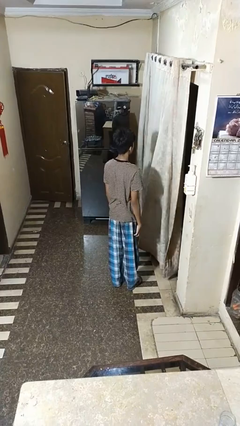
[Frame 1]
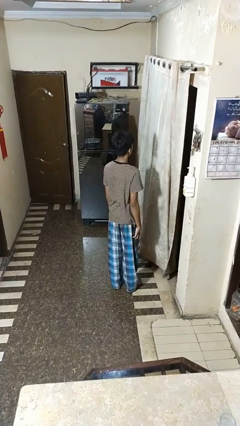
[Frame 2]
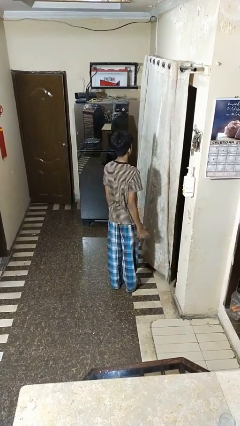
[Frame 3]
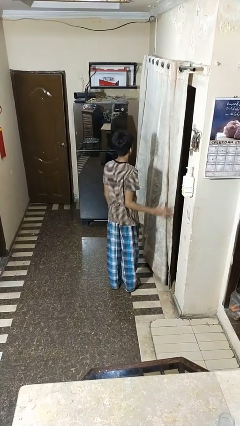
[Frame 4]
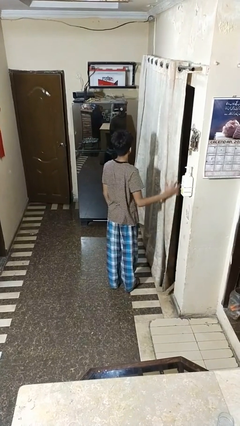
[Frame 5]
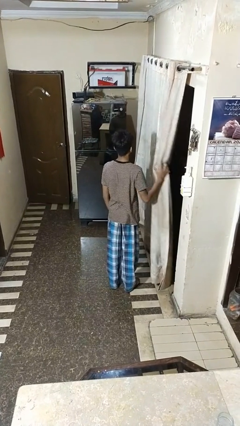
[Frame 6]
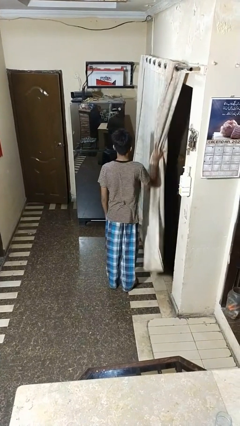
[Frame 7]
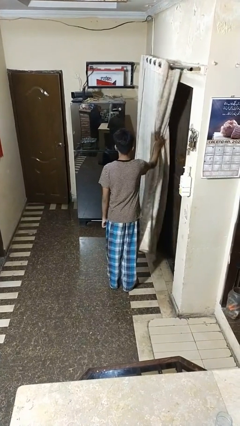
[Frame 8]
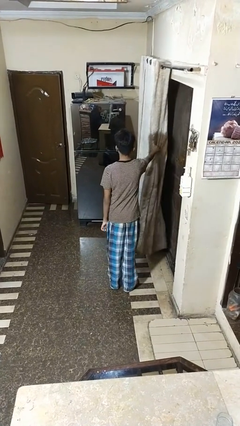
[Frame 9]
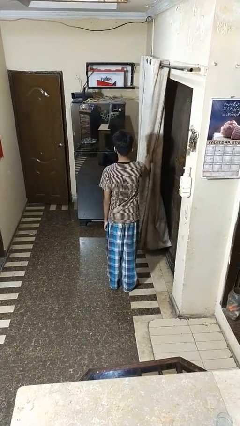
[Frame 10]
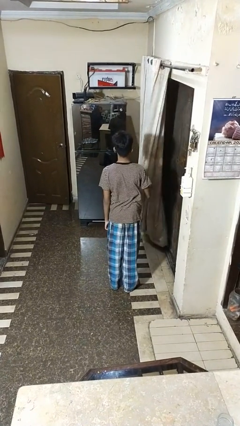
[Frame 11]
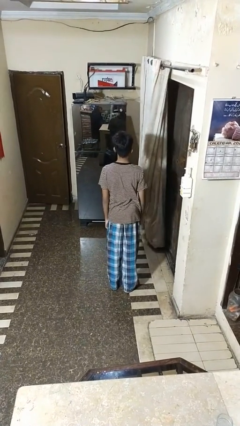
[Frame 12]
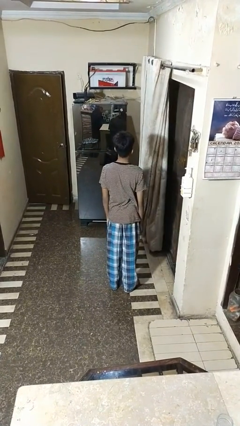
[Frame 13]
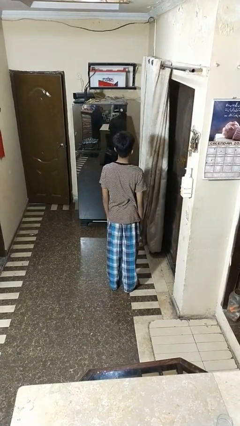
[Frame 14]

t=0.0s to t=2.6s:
person opens curtains

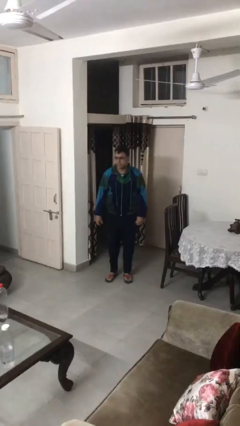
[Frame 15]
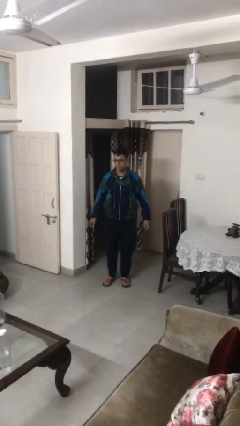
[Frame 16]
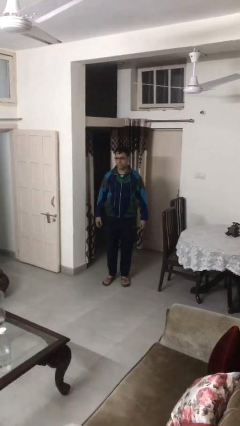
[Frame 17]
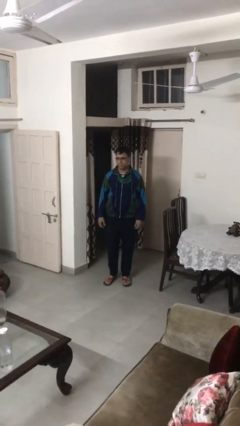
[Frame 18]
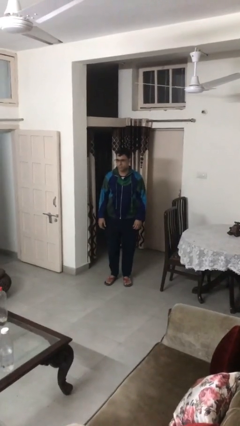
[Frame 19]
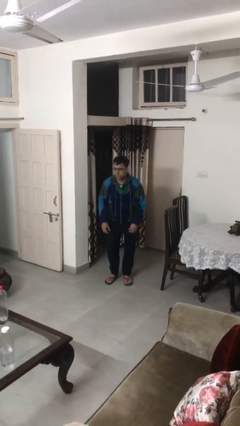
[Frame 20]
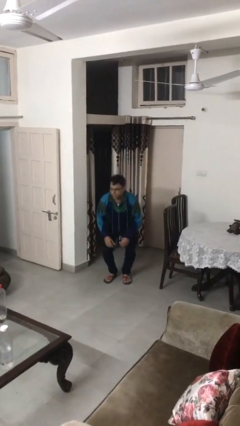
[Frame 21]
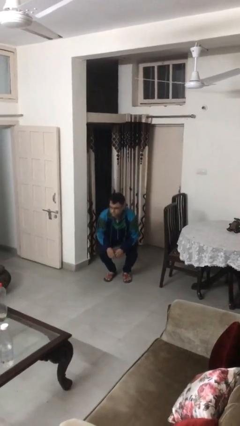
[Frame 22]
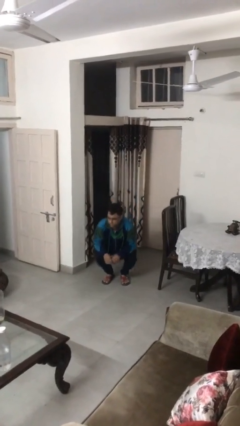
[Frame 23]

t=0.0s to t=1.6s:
person sits down

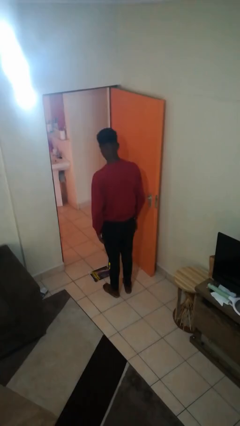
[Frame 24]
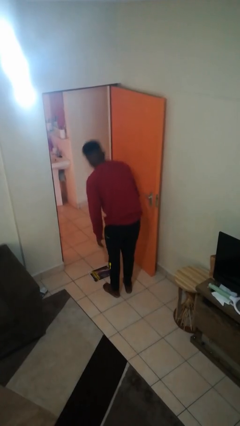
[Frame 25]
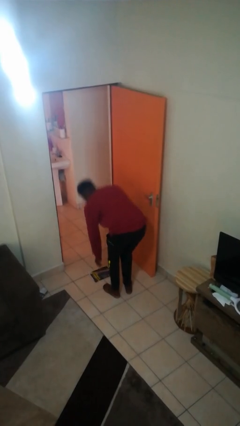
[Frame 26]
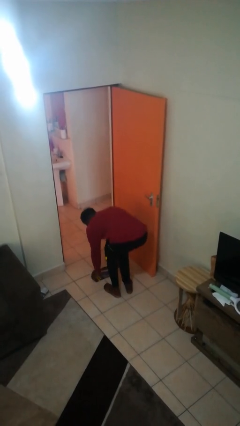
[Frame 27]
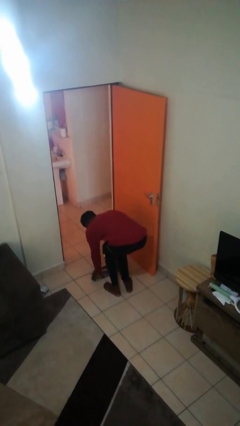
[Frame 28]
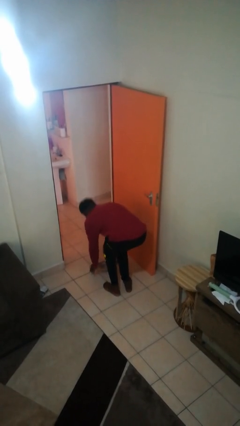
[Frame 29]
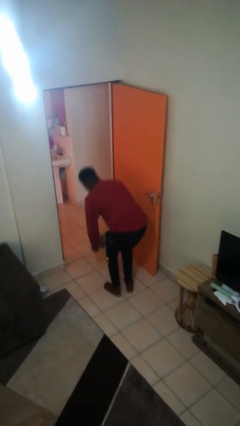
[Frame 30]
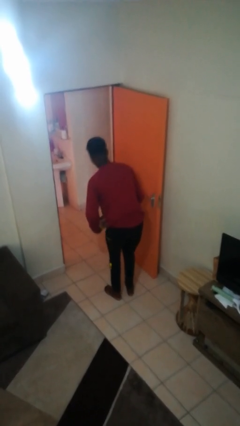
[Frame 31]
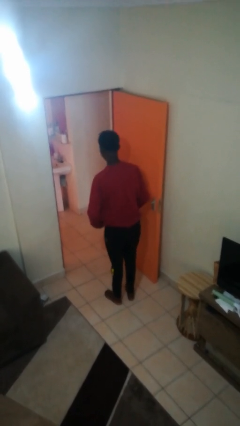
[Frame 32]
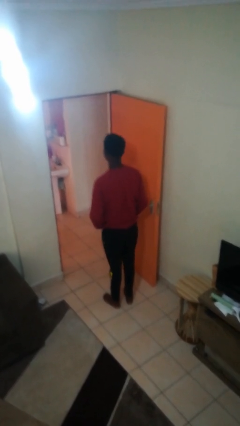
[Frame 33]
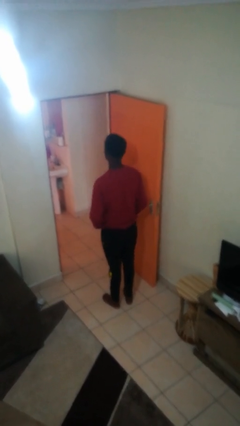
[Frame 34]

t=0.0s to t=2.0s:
person picks up object from floor

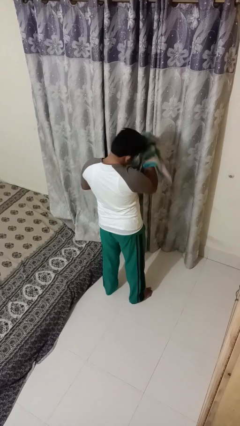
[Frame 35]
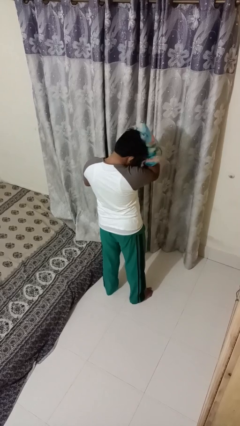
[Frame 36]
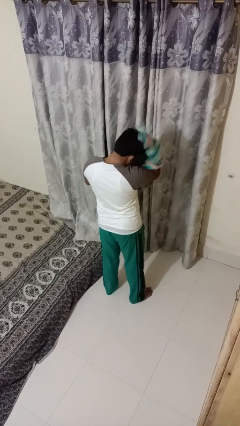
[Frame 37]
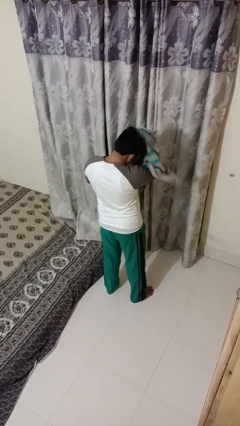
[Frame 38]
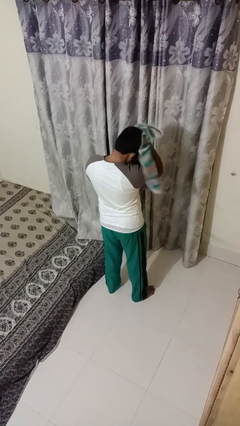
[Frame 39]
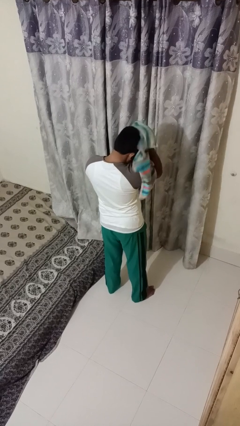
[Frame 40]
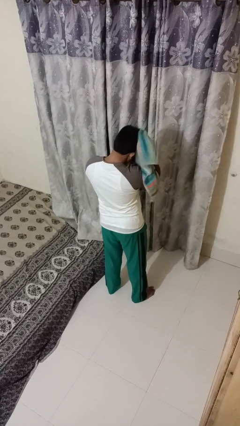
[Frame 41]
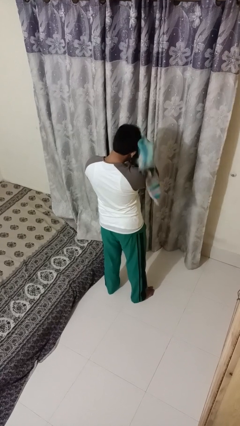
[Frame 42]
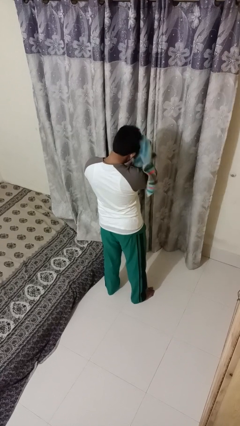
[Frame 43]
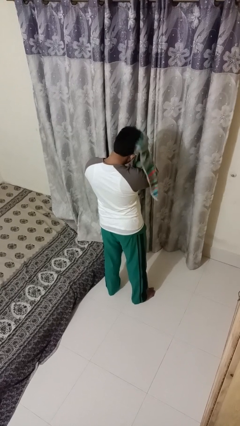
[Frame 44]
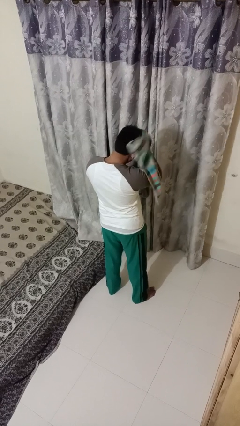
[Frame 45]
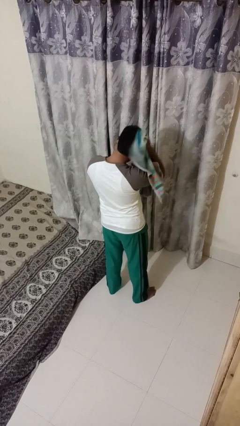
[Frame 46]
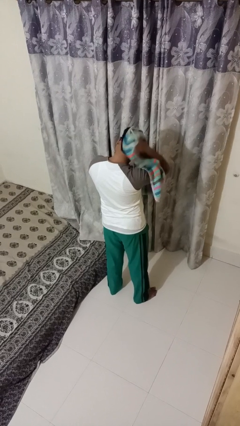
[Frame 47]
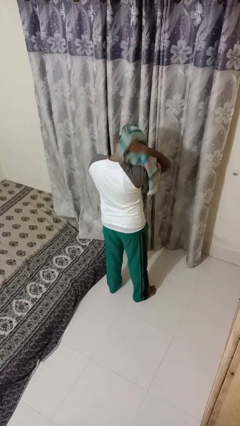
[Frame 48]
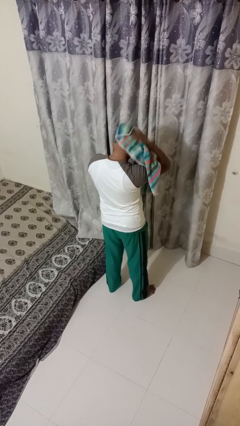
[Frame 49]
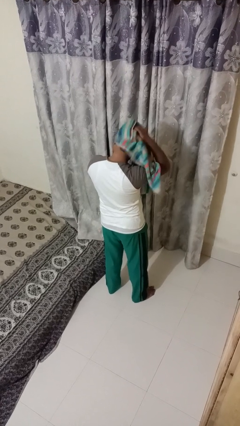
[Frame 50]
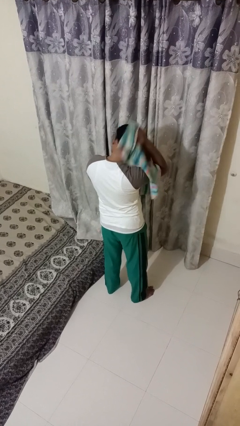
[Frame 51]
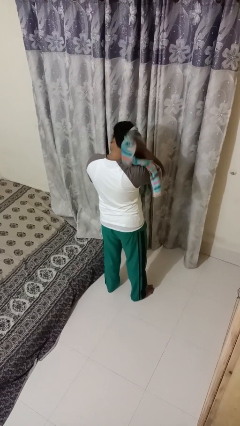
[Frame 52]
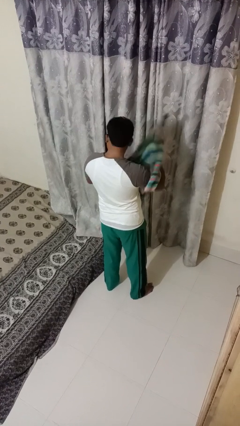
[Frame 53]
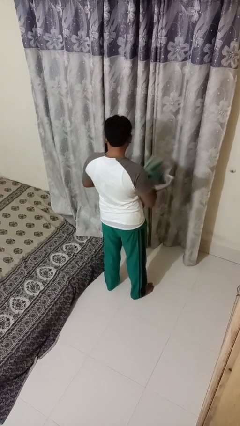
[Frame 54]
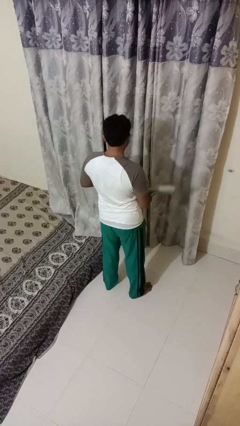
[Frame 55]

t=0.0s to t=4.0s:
person dries hair with towel

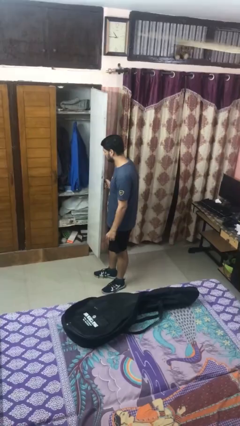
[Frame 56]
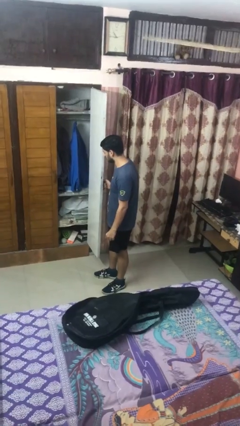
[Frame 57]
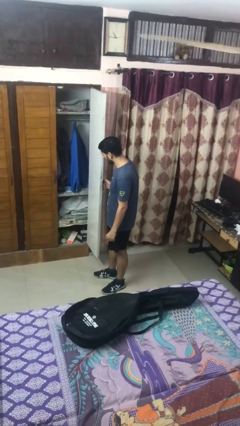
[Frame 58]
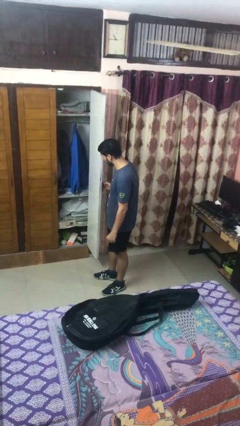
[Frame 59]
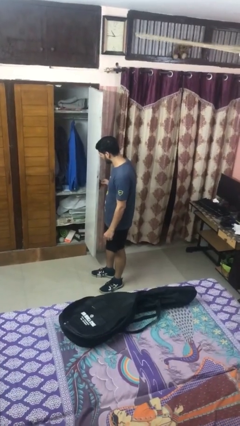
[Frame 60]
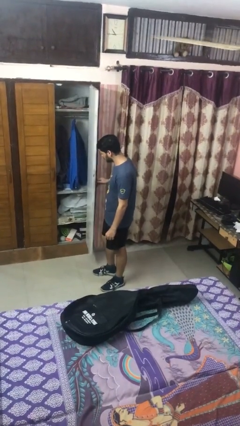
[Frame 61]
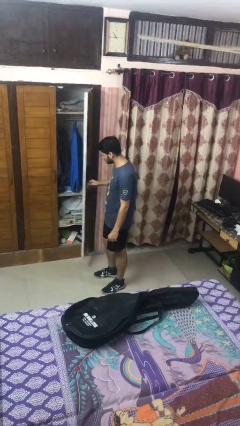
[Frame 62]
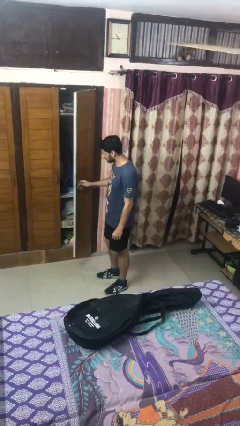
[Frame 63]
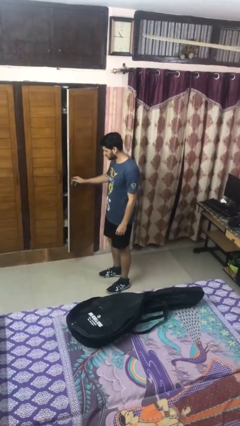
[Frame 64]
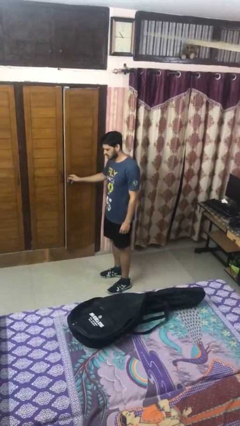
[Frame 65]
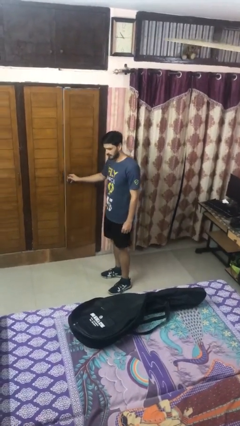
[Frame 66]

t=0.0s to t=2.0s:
person closes closet door

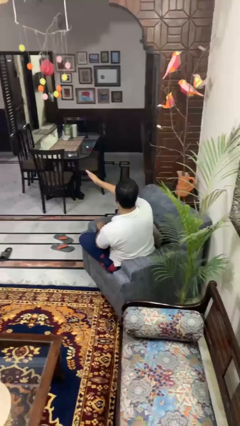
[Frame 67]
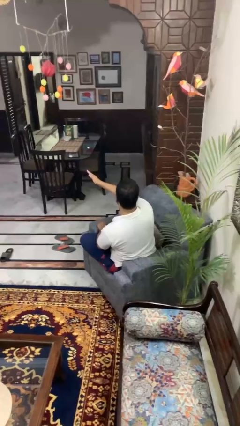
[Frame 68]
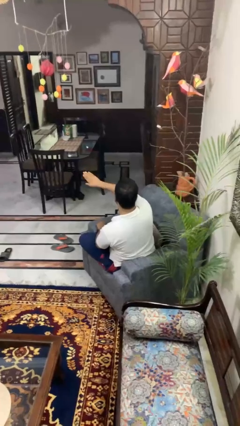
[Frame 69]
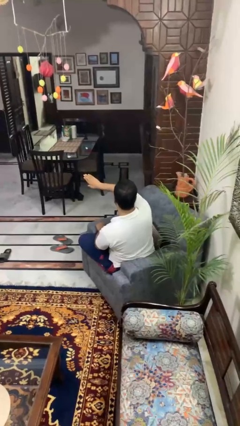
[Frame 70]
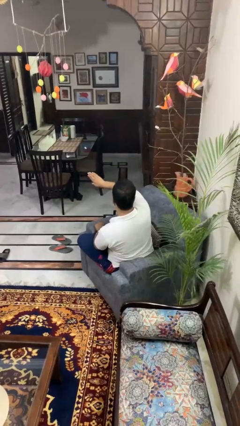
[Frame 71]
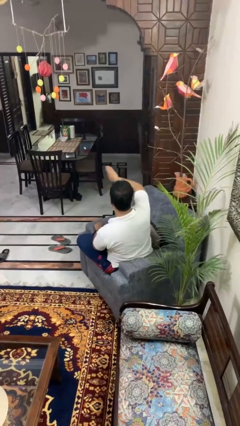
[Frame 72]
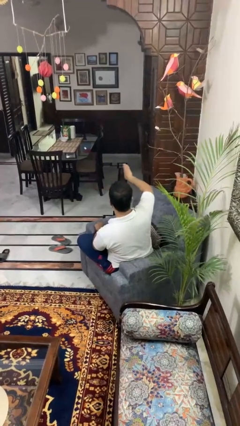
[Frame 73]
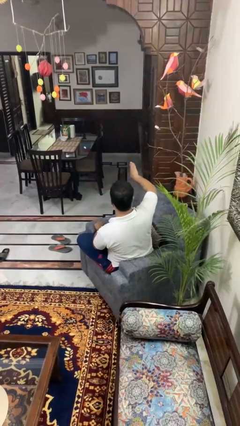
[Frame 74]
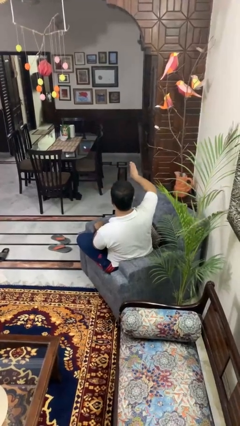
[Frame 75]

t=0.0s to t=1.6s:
person gestures swipe right

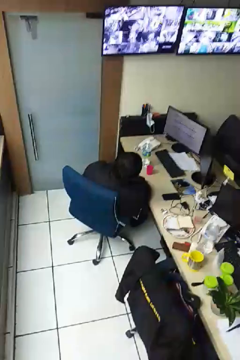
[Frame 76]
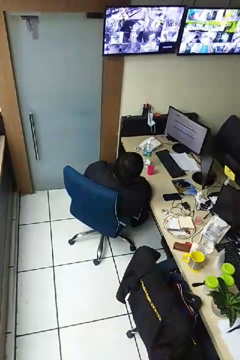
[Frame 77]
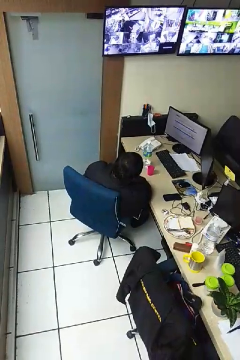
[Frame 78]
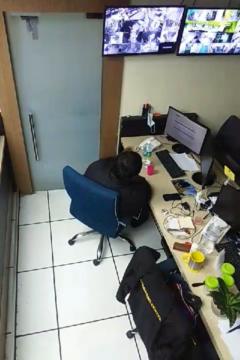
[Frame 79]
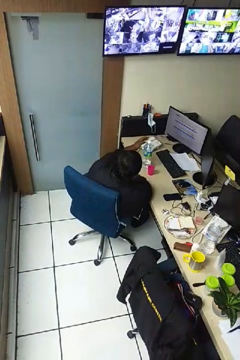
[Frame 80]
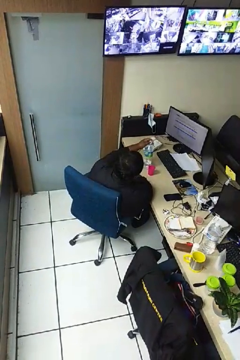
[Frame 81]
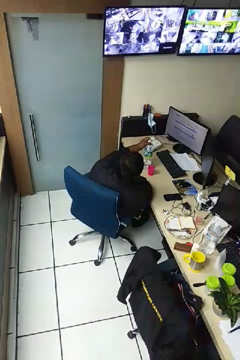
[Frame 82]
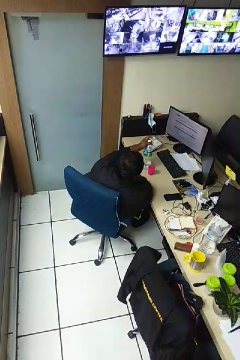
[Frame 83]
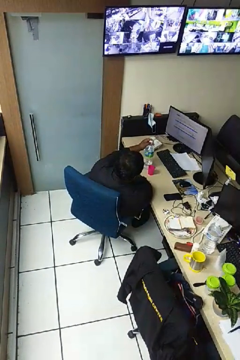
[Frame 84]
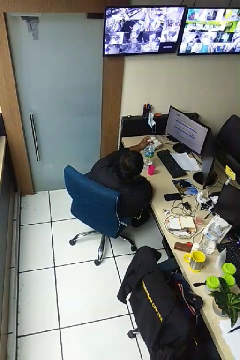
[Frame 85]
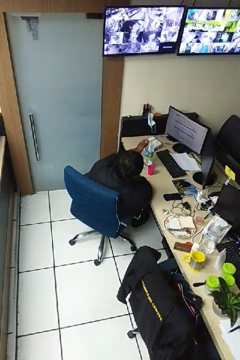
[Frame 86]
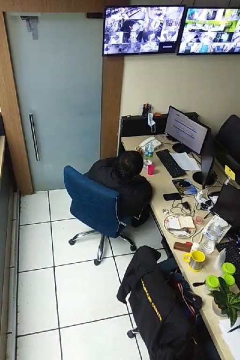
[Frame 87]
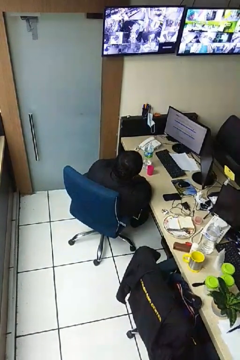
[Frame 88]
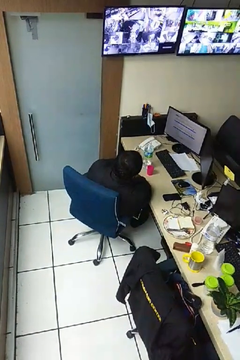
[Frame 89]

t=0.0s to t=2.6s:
person unscrews lid from bottle

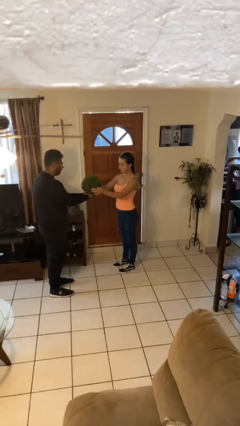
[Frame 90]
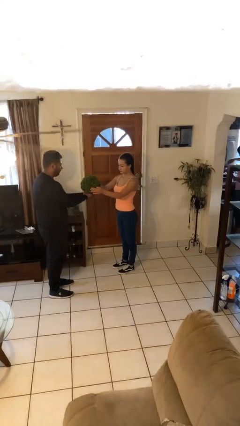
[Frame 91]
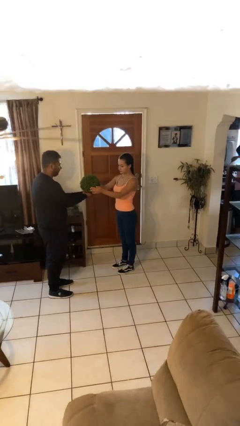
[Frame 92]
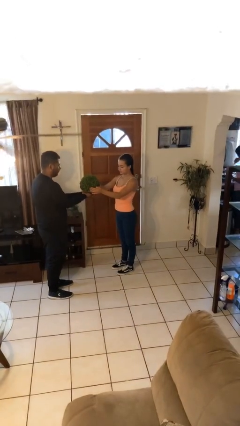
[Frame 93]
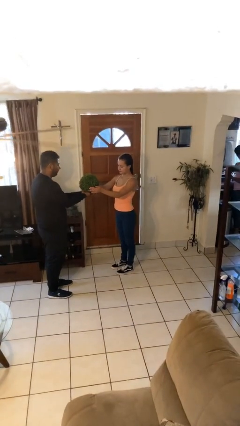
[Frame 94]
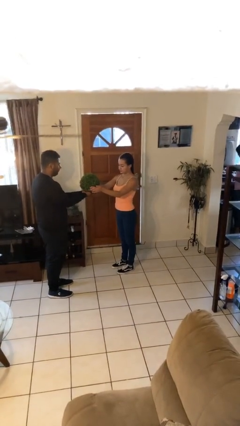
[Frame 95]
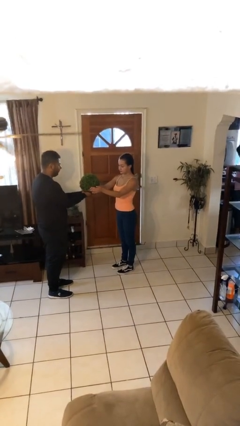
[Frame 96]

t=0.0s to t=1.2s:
person transfers object to person

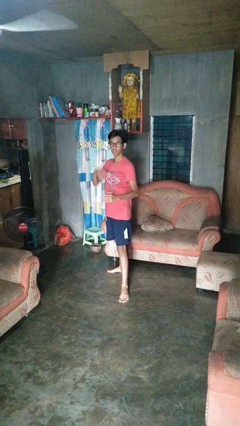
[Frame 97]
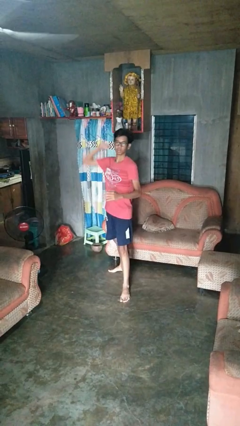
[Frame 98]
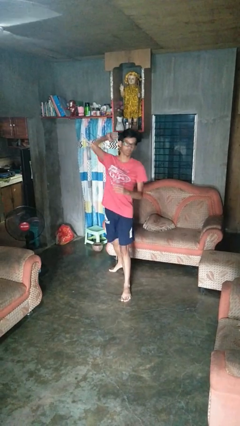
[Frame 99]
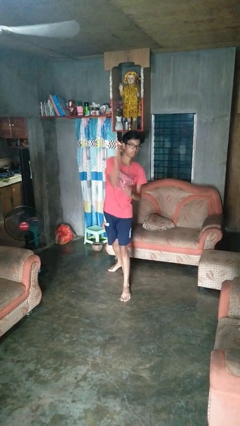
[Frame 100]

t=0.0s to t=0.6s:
person karate chop
